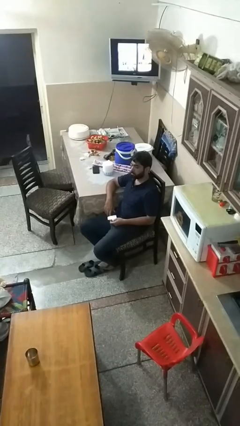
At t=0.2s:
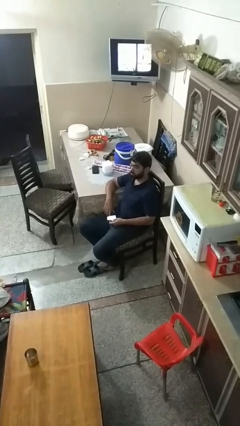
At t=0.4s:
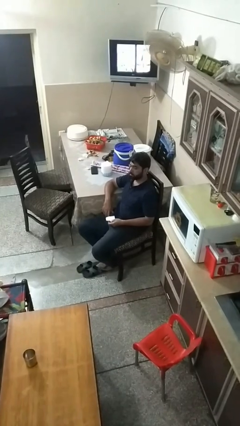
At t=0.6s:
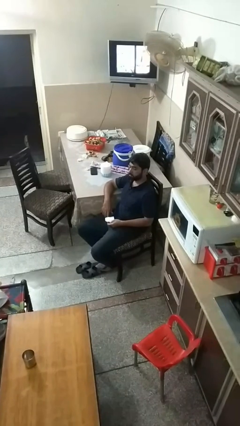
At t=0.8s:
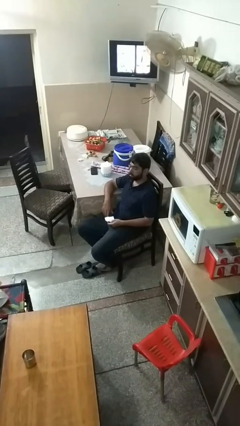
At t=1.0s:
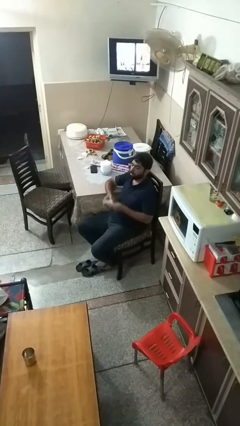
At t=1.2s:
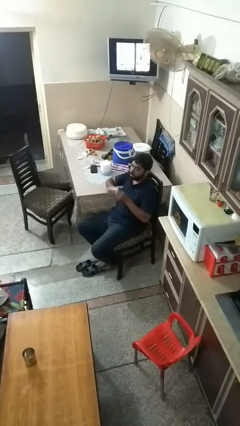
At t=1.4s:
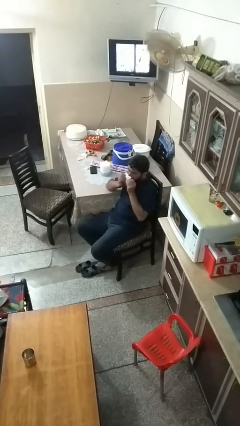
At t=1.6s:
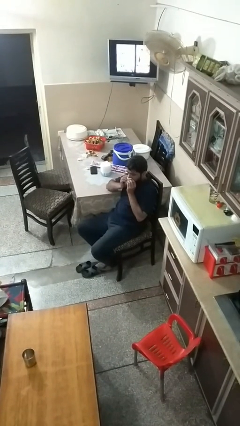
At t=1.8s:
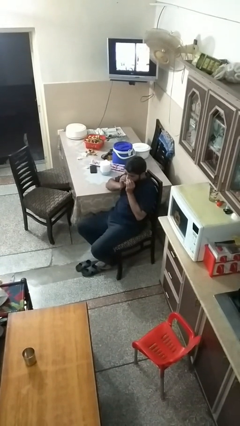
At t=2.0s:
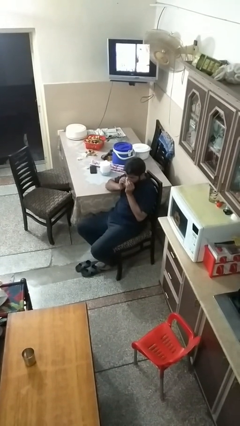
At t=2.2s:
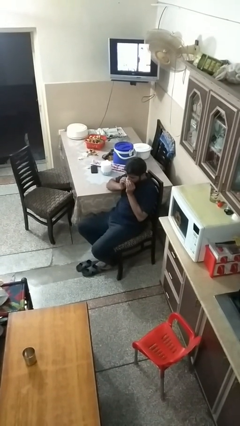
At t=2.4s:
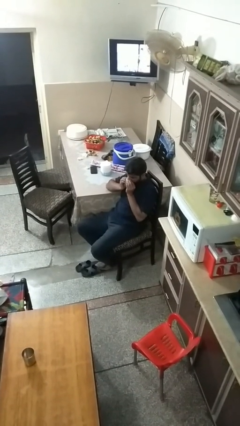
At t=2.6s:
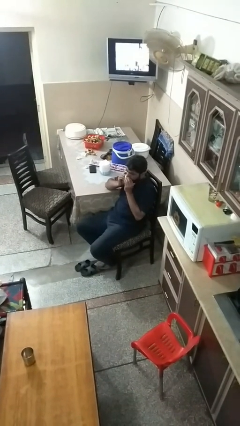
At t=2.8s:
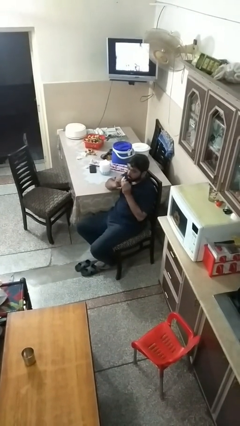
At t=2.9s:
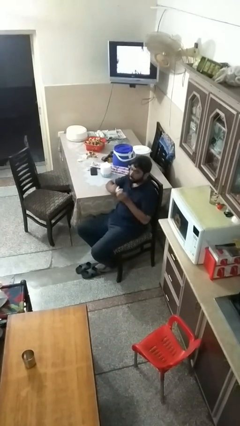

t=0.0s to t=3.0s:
person blows nose

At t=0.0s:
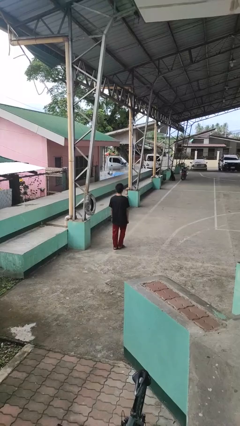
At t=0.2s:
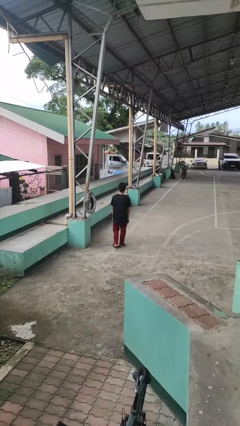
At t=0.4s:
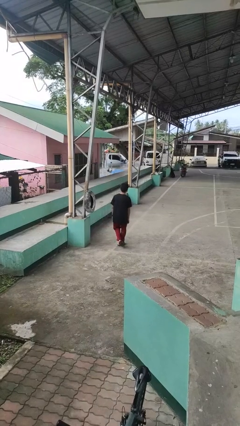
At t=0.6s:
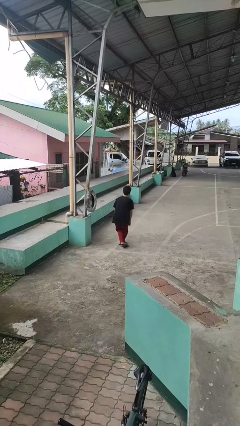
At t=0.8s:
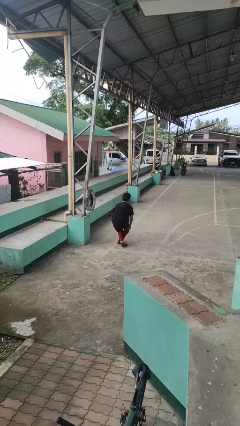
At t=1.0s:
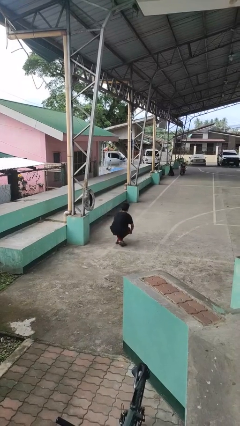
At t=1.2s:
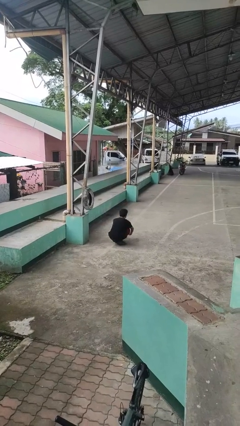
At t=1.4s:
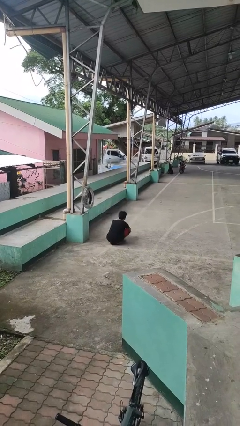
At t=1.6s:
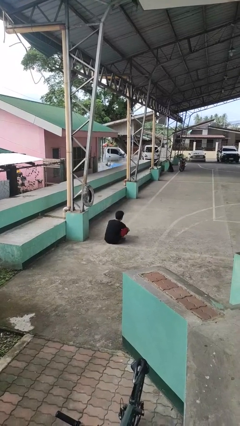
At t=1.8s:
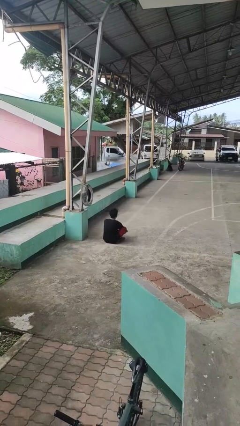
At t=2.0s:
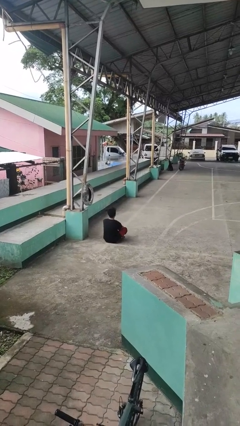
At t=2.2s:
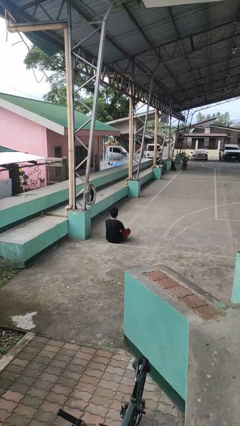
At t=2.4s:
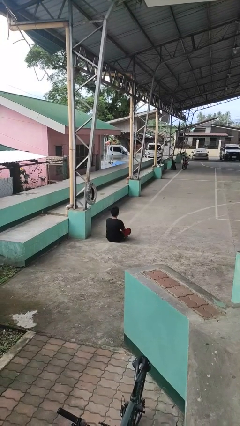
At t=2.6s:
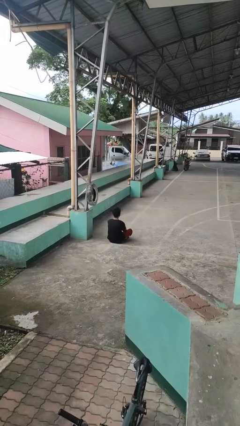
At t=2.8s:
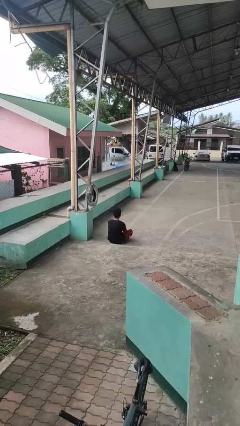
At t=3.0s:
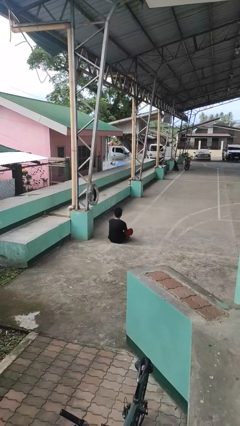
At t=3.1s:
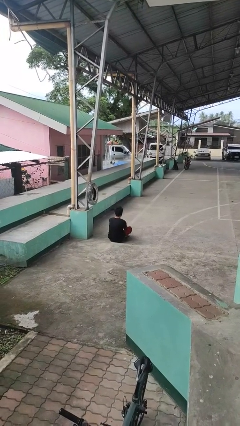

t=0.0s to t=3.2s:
person sits crisscross

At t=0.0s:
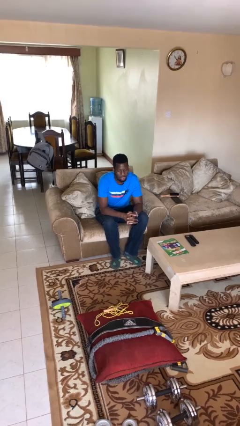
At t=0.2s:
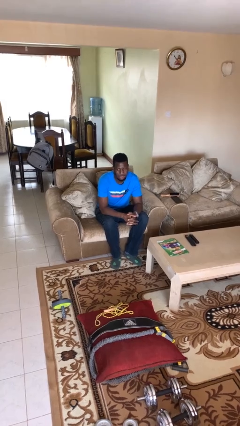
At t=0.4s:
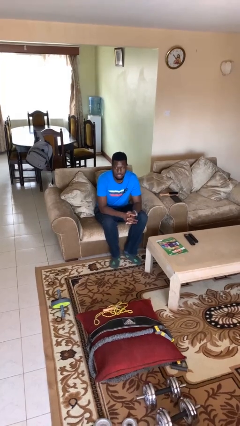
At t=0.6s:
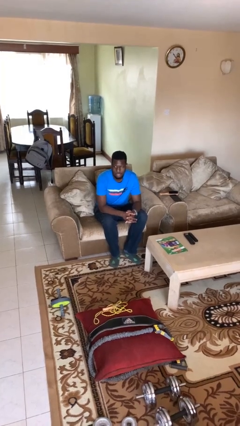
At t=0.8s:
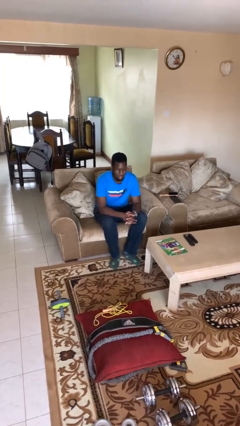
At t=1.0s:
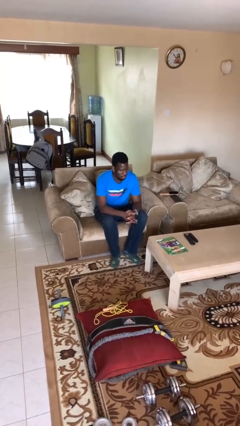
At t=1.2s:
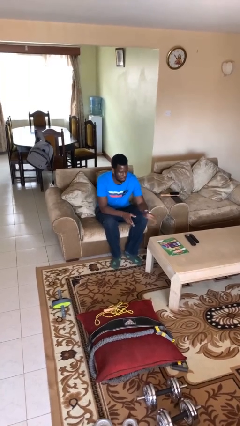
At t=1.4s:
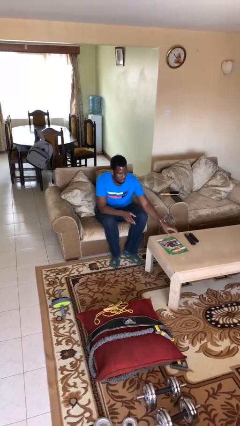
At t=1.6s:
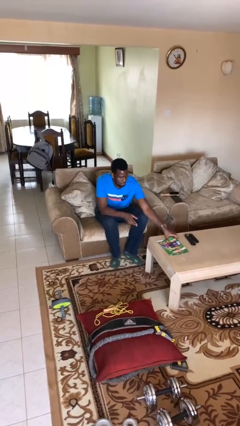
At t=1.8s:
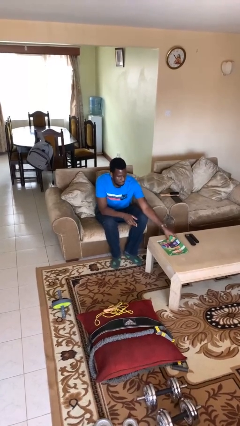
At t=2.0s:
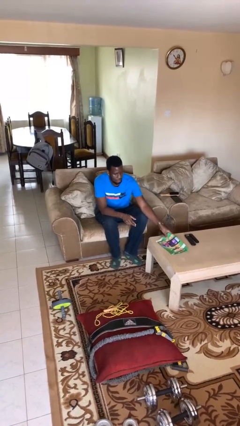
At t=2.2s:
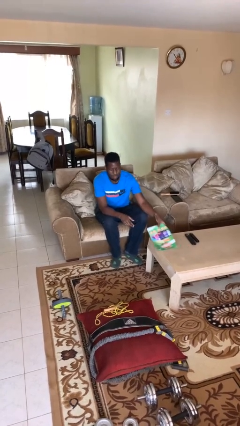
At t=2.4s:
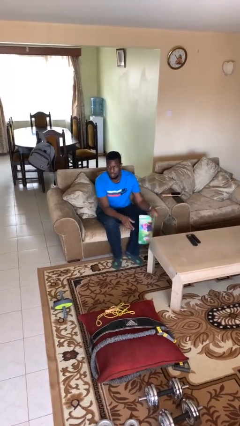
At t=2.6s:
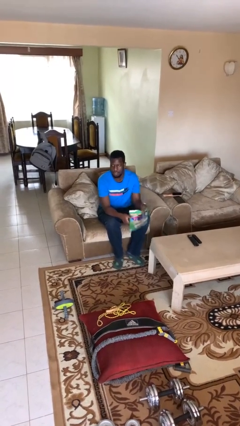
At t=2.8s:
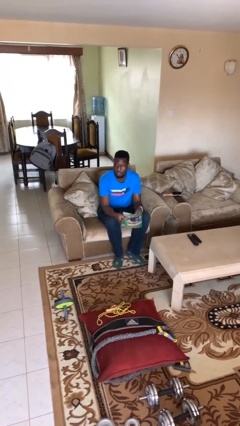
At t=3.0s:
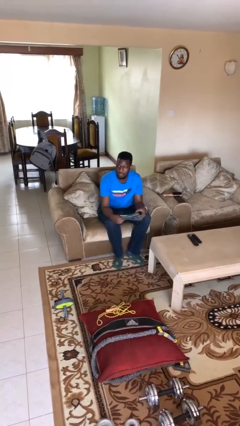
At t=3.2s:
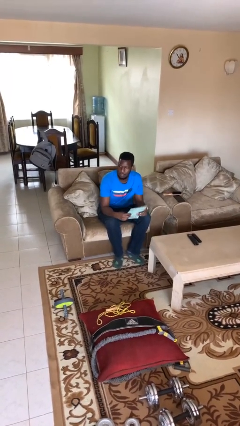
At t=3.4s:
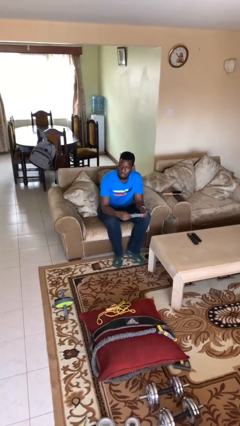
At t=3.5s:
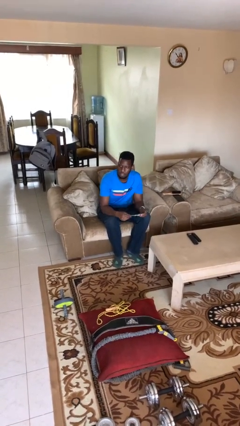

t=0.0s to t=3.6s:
person picks up object from table

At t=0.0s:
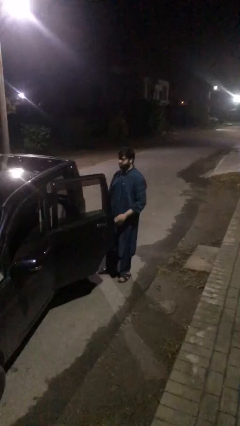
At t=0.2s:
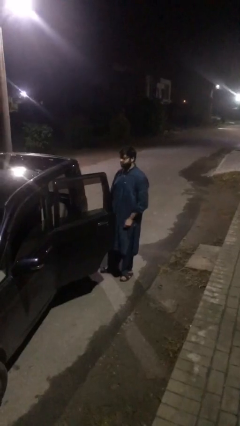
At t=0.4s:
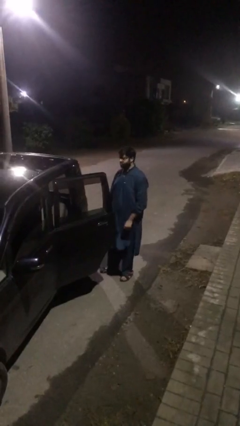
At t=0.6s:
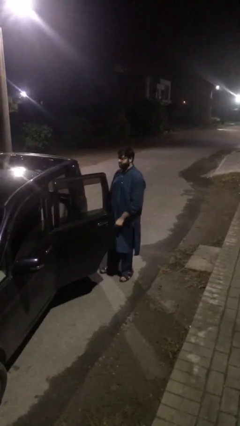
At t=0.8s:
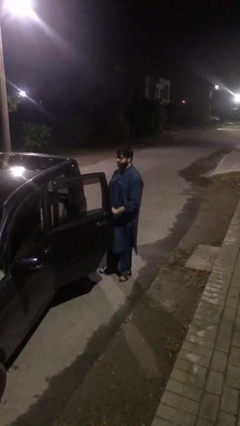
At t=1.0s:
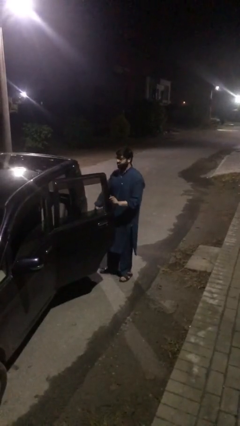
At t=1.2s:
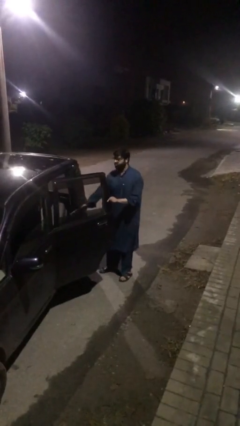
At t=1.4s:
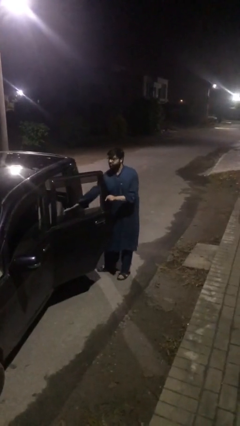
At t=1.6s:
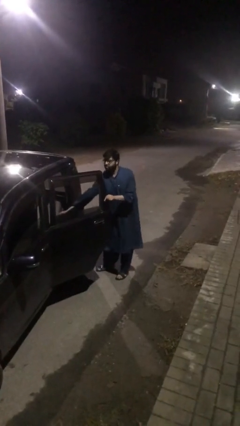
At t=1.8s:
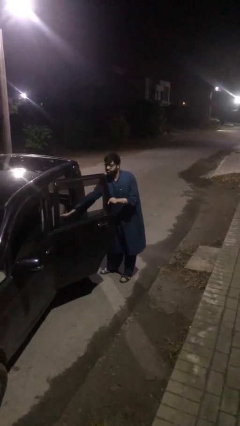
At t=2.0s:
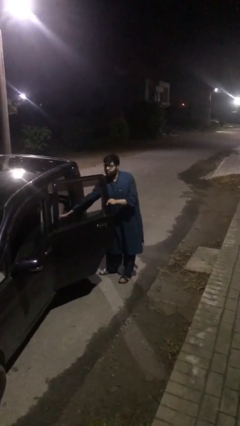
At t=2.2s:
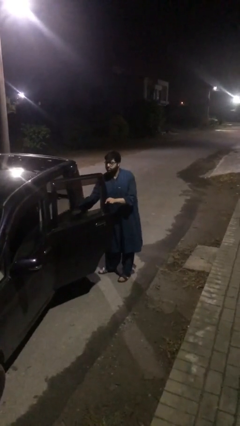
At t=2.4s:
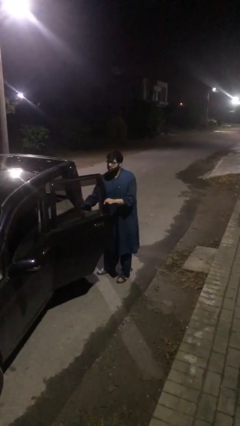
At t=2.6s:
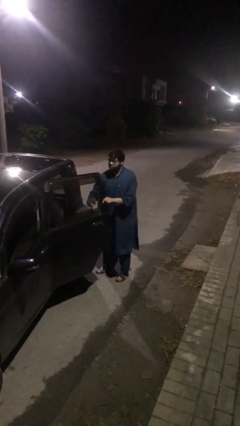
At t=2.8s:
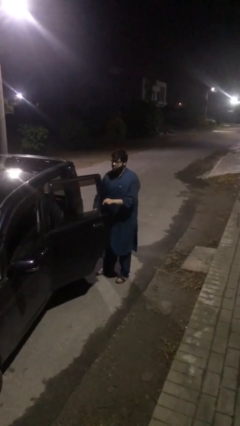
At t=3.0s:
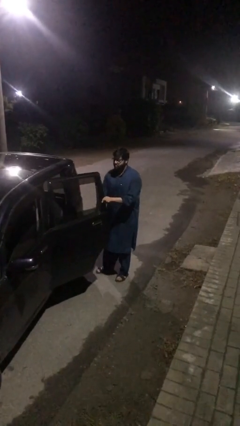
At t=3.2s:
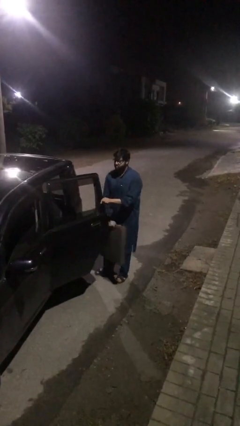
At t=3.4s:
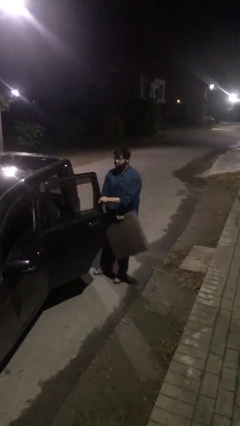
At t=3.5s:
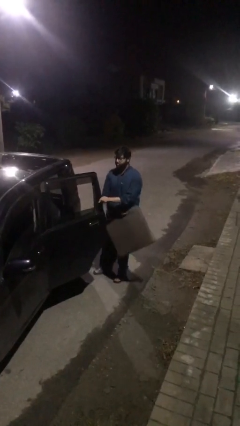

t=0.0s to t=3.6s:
person unloads car

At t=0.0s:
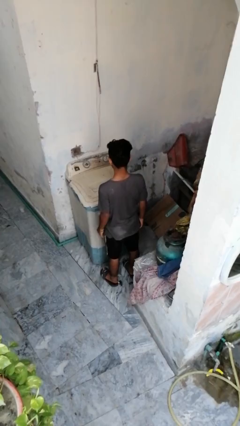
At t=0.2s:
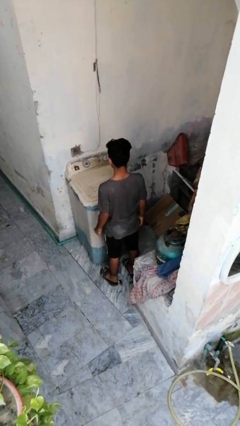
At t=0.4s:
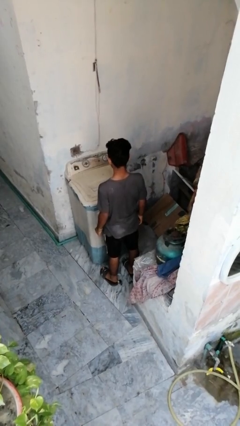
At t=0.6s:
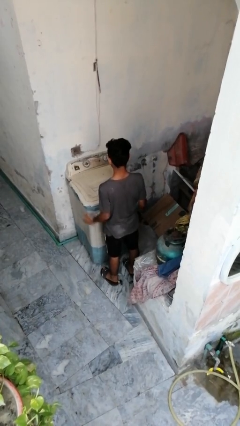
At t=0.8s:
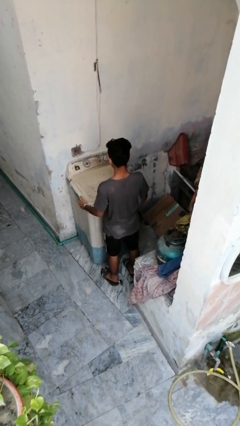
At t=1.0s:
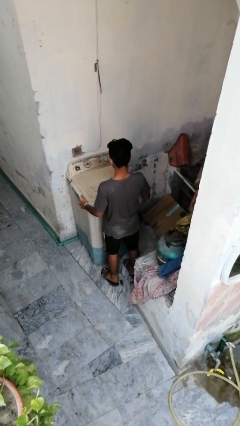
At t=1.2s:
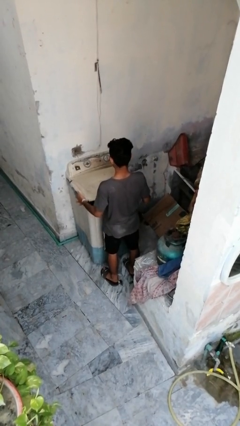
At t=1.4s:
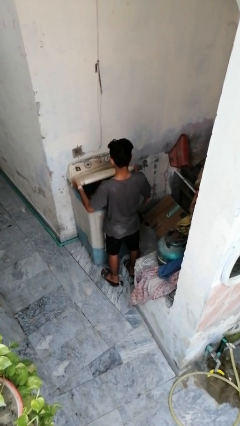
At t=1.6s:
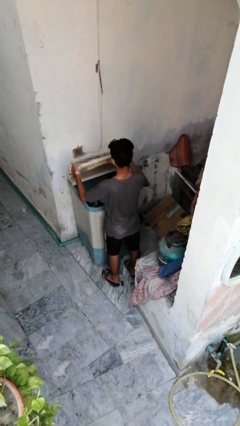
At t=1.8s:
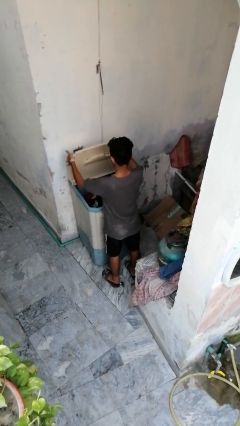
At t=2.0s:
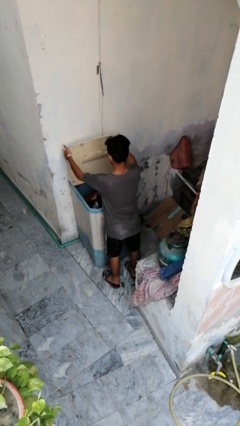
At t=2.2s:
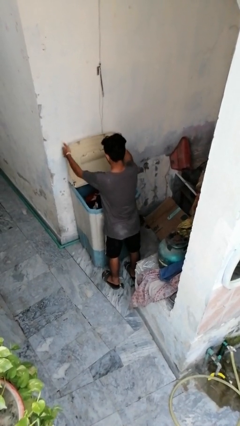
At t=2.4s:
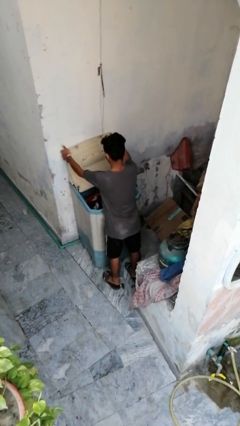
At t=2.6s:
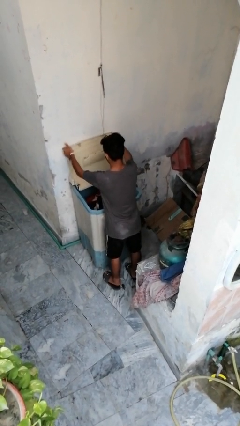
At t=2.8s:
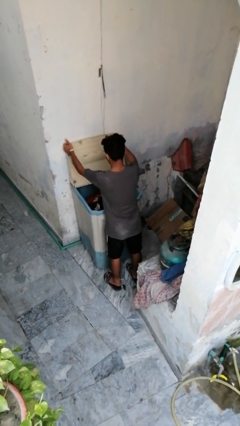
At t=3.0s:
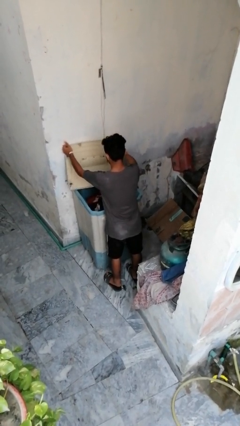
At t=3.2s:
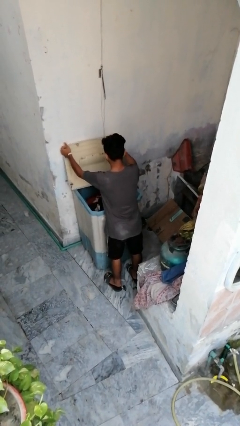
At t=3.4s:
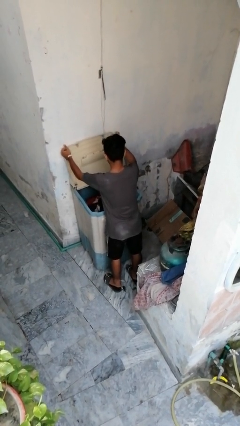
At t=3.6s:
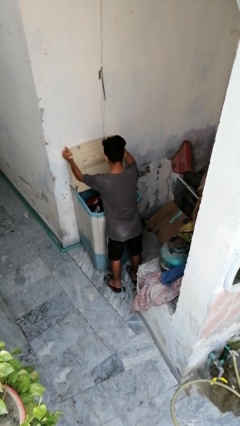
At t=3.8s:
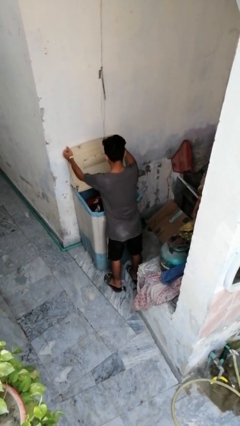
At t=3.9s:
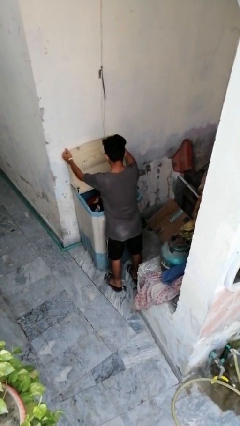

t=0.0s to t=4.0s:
person opens clothes washer
